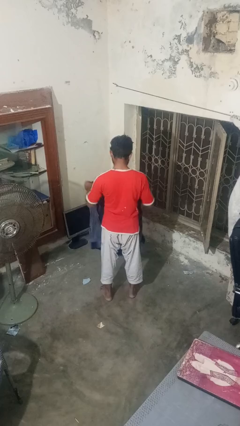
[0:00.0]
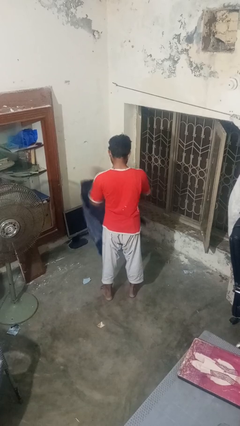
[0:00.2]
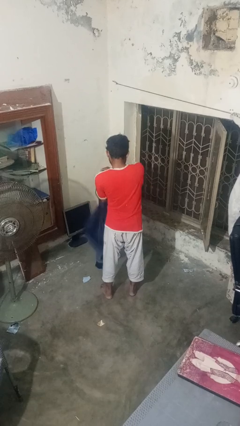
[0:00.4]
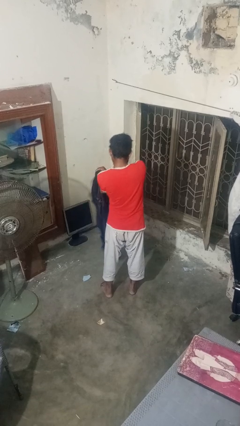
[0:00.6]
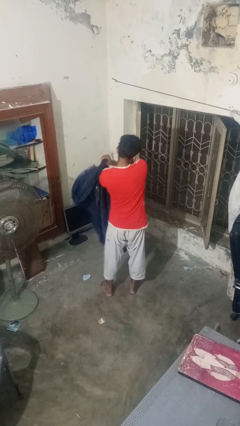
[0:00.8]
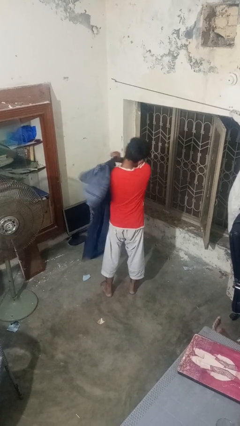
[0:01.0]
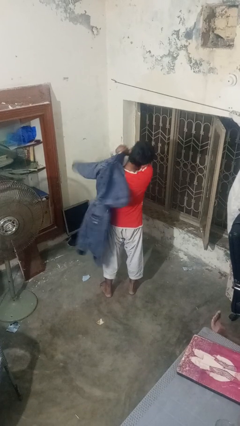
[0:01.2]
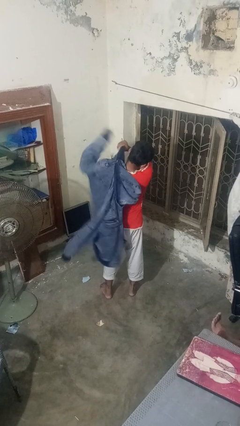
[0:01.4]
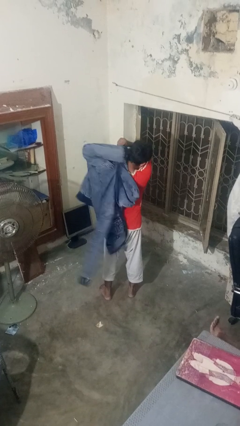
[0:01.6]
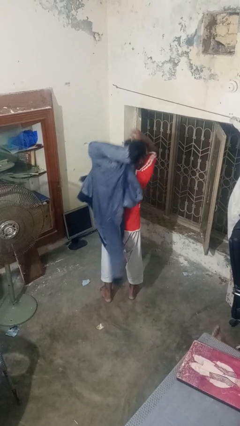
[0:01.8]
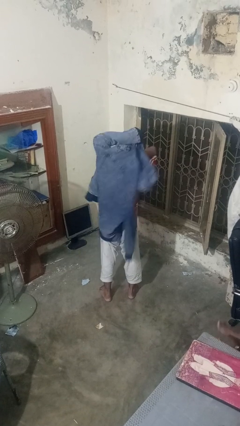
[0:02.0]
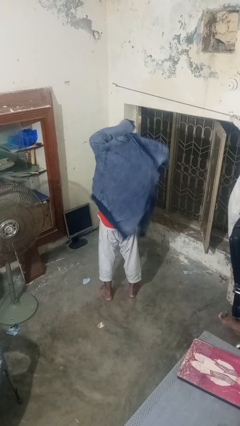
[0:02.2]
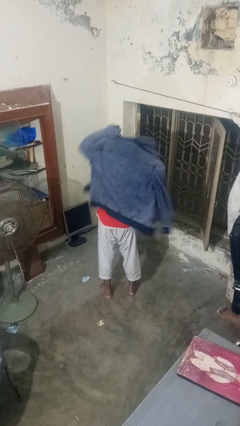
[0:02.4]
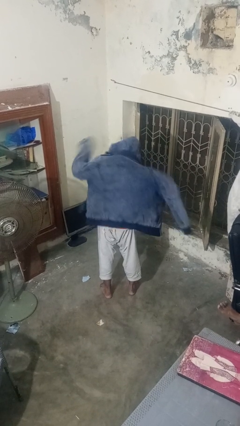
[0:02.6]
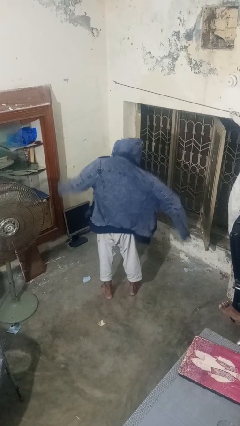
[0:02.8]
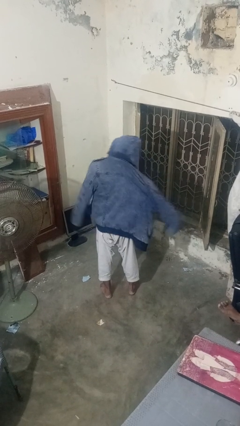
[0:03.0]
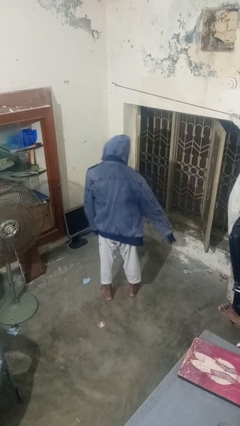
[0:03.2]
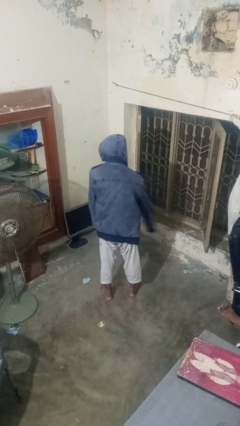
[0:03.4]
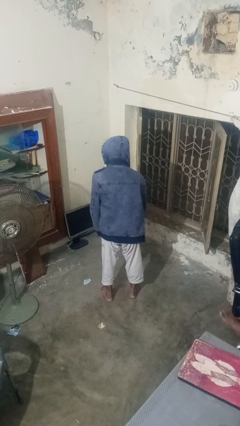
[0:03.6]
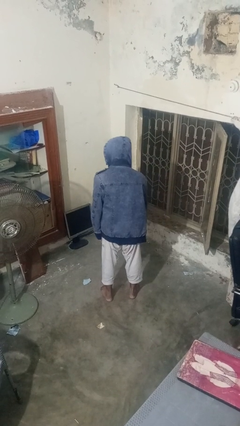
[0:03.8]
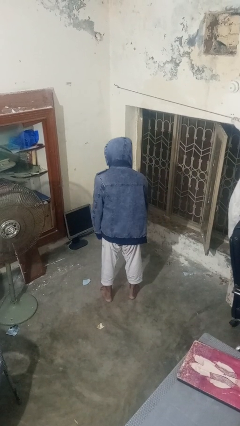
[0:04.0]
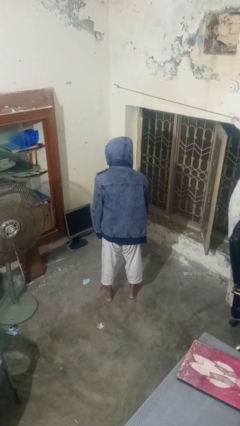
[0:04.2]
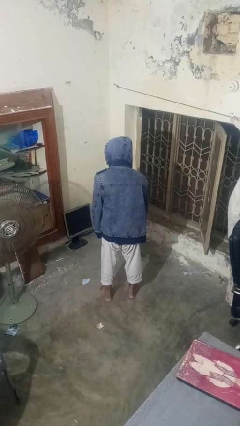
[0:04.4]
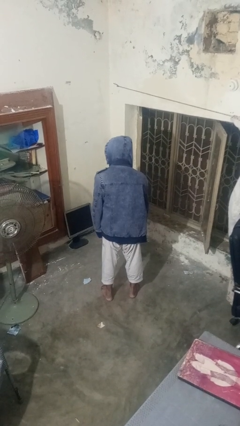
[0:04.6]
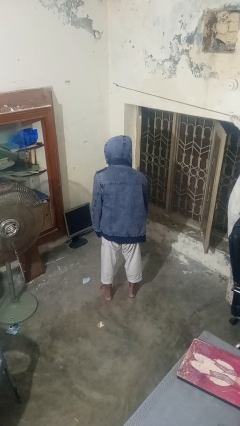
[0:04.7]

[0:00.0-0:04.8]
person puts on hoodie

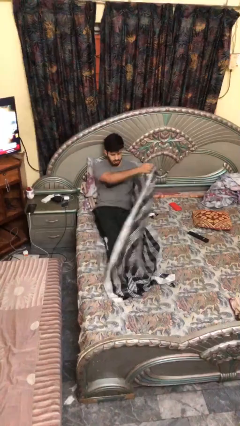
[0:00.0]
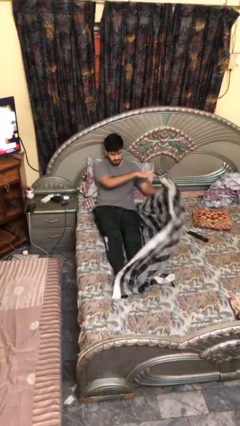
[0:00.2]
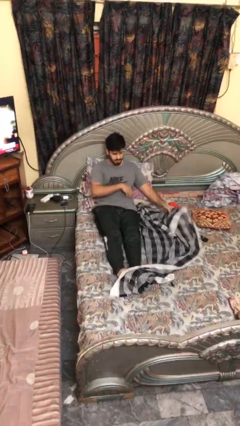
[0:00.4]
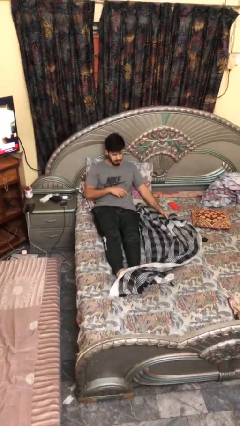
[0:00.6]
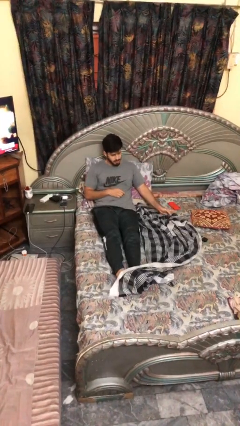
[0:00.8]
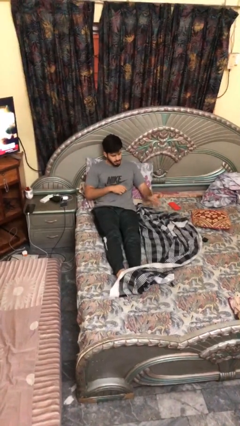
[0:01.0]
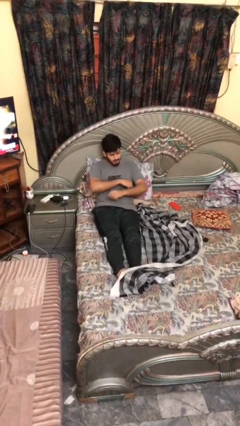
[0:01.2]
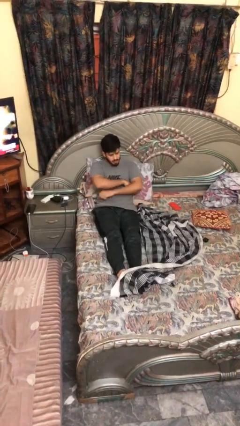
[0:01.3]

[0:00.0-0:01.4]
person uncovers with bedsheets

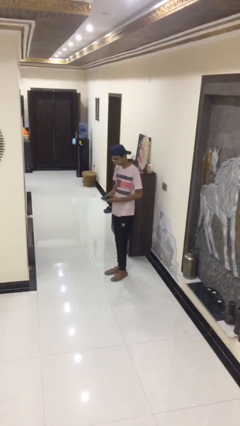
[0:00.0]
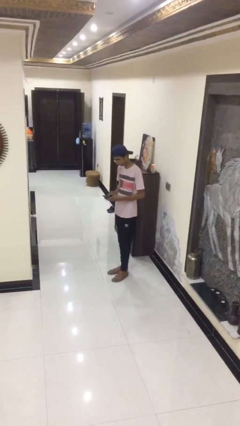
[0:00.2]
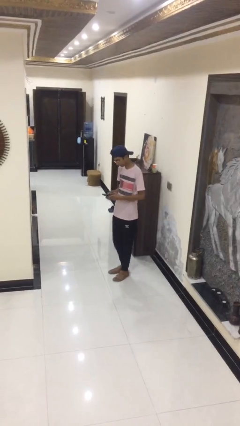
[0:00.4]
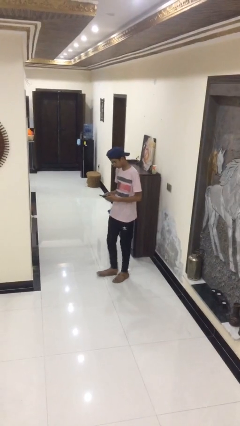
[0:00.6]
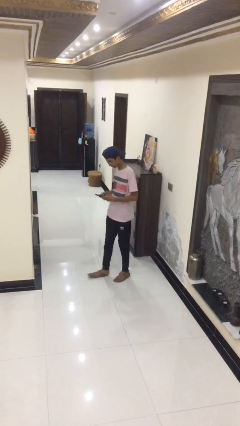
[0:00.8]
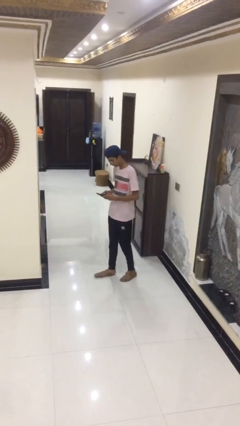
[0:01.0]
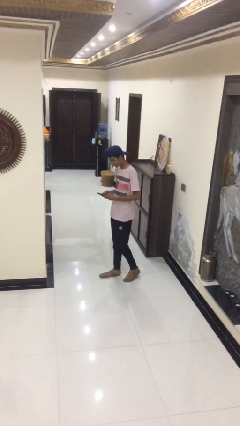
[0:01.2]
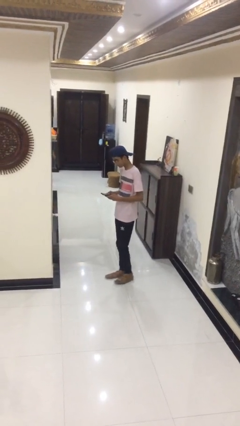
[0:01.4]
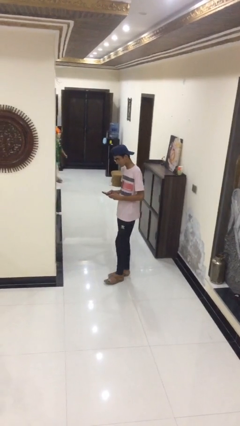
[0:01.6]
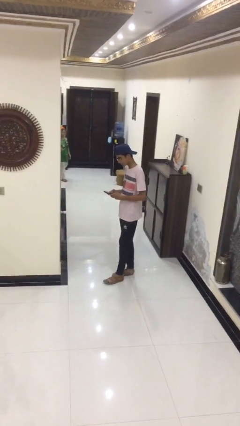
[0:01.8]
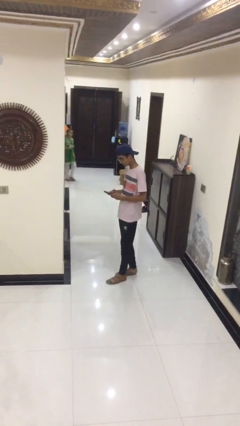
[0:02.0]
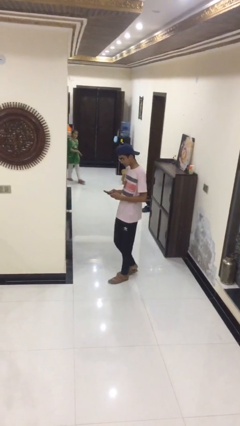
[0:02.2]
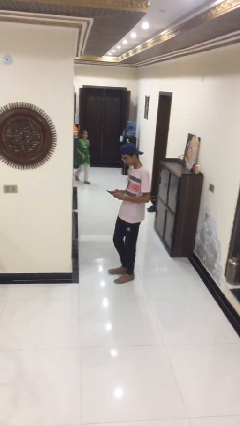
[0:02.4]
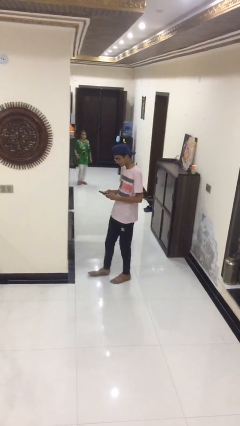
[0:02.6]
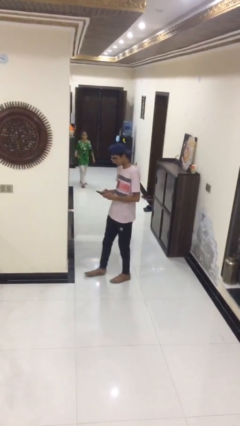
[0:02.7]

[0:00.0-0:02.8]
person texts on phone

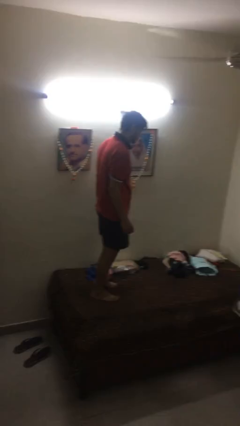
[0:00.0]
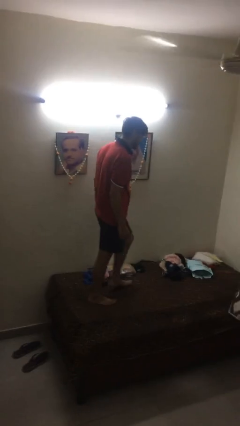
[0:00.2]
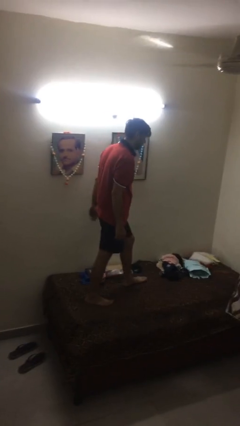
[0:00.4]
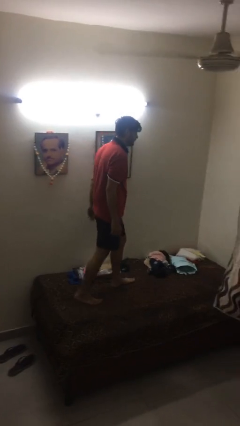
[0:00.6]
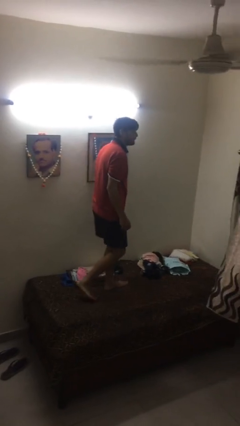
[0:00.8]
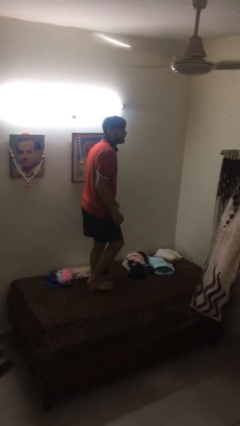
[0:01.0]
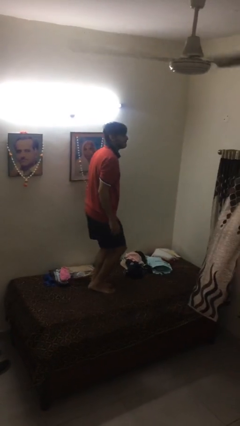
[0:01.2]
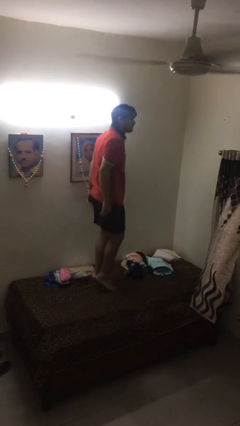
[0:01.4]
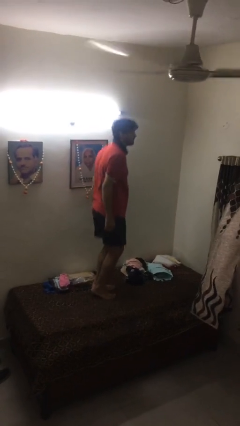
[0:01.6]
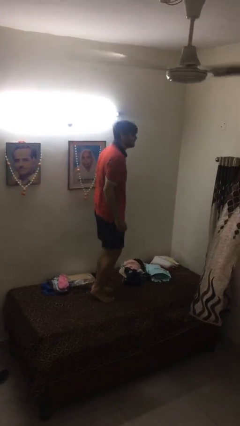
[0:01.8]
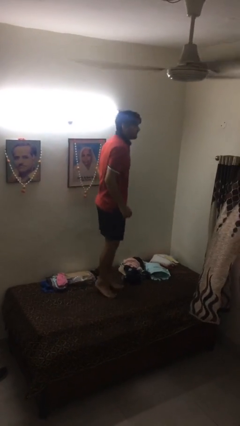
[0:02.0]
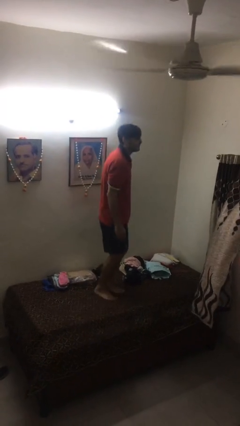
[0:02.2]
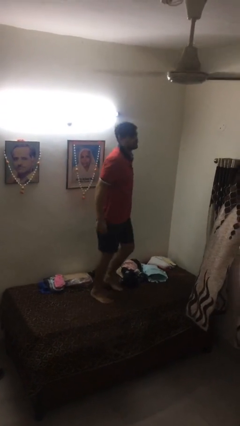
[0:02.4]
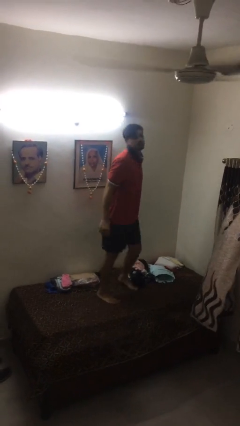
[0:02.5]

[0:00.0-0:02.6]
person jumps on bed

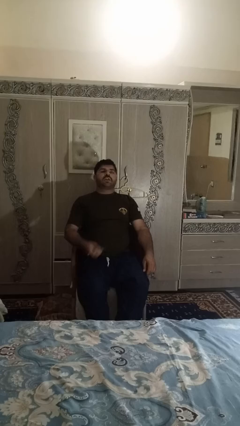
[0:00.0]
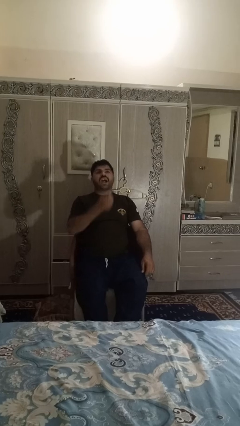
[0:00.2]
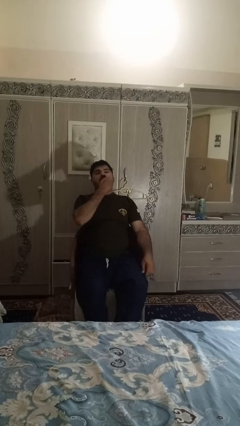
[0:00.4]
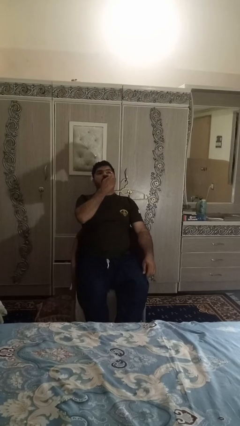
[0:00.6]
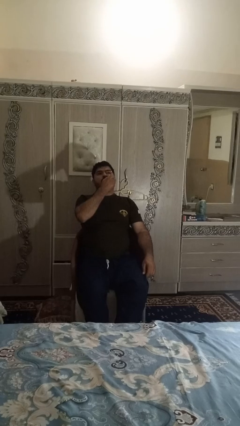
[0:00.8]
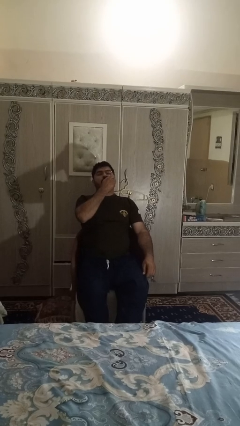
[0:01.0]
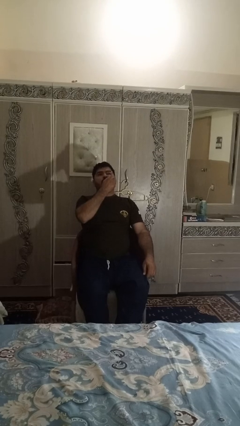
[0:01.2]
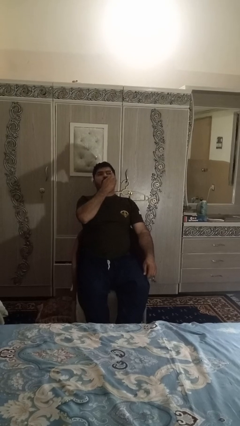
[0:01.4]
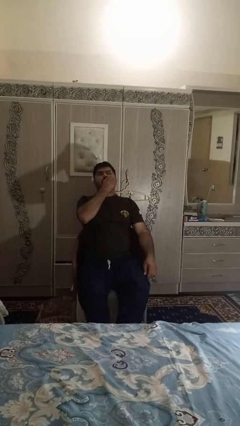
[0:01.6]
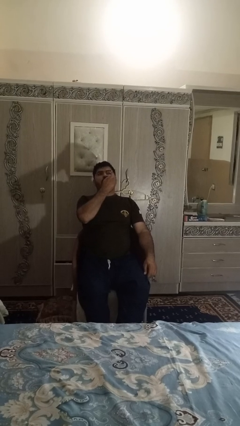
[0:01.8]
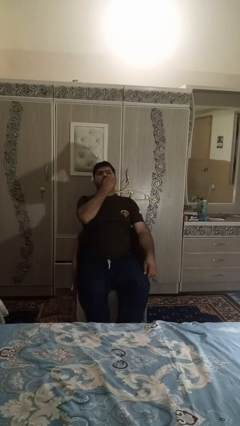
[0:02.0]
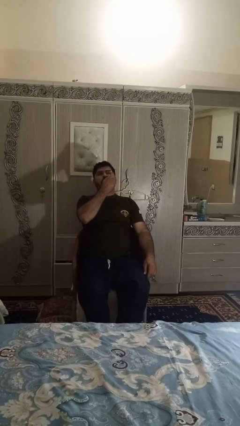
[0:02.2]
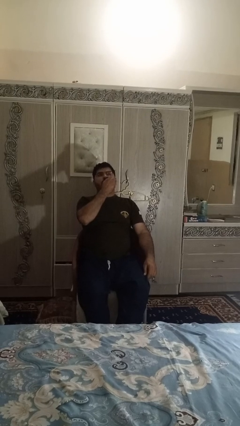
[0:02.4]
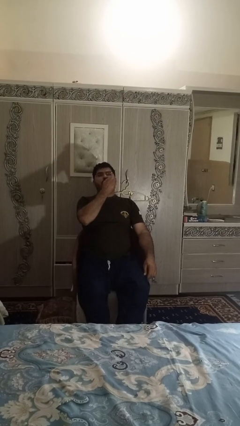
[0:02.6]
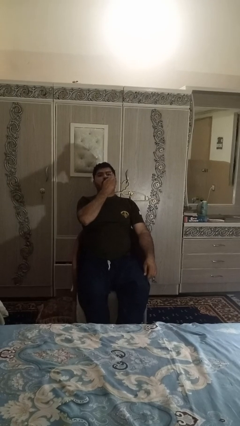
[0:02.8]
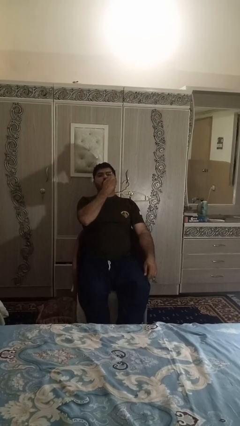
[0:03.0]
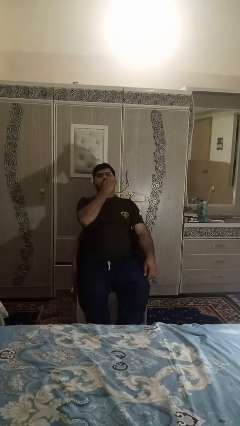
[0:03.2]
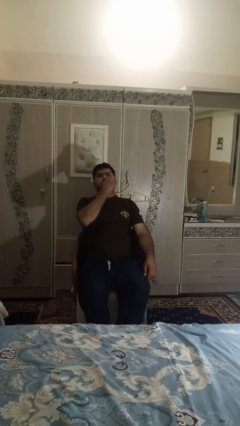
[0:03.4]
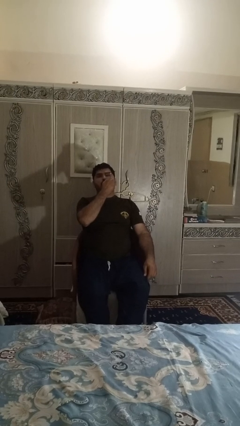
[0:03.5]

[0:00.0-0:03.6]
person flosses

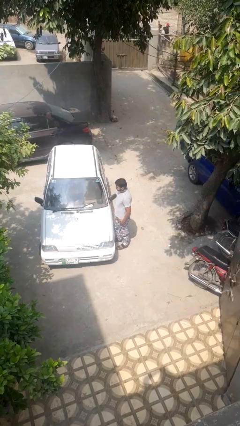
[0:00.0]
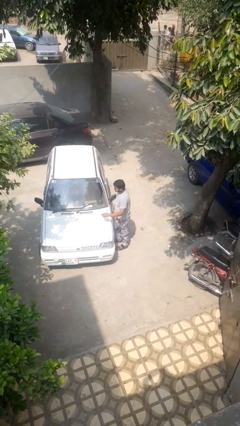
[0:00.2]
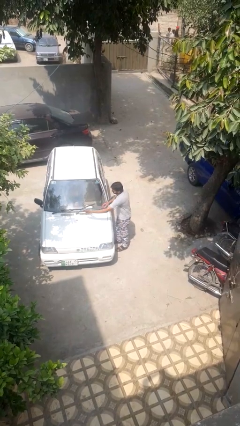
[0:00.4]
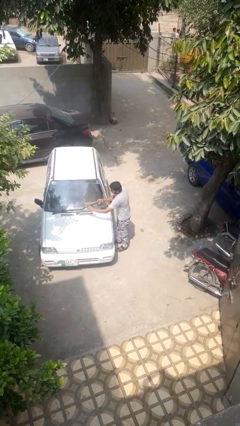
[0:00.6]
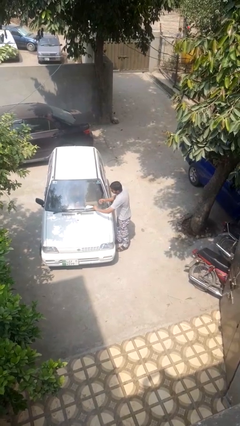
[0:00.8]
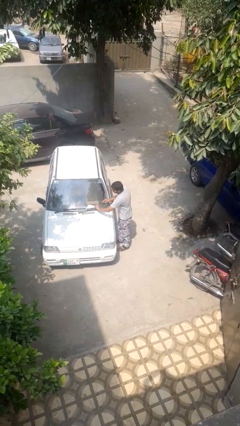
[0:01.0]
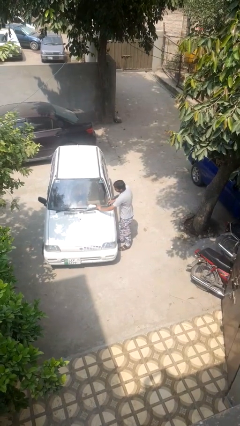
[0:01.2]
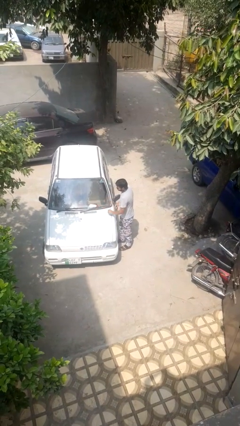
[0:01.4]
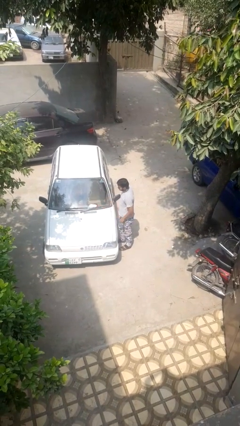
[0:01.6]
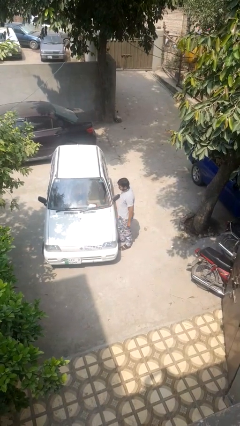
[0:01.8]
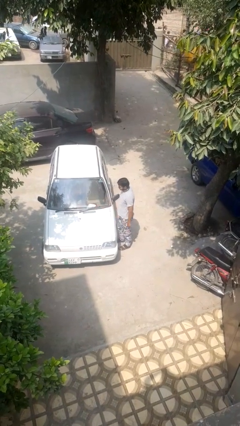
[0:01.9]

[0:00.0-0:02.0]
person flips down car wipers

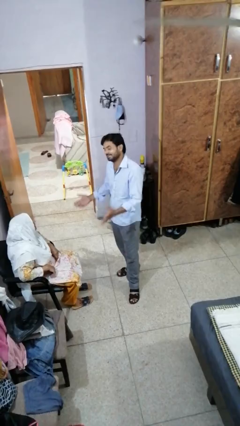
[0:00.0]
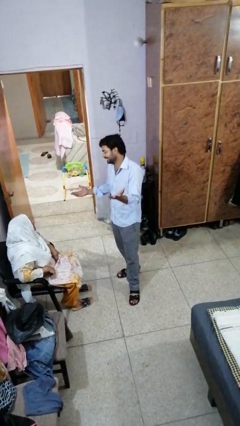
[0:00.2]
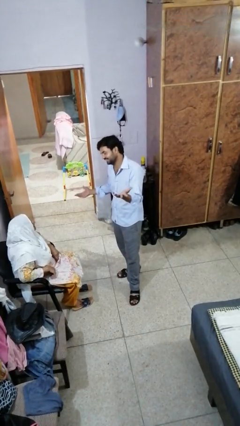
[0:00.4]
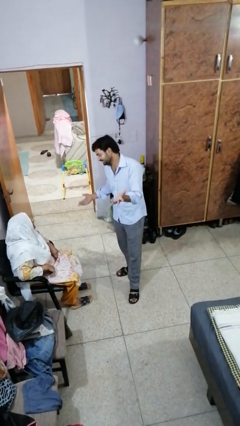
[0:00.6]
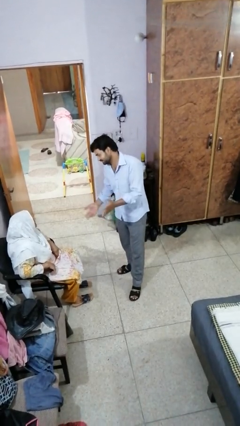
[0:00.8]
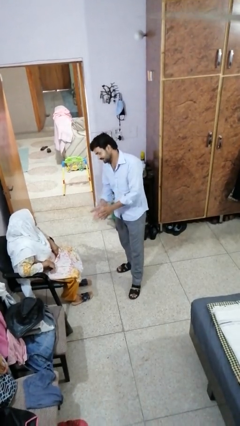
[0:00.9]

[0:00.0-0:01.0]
person laughs with person
